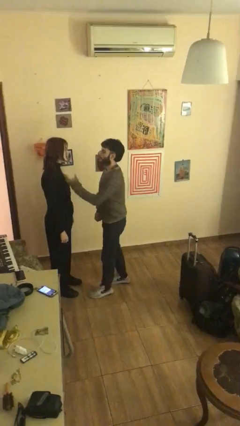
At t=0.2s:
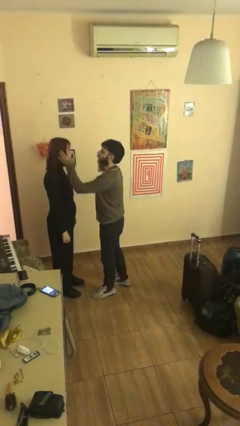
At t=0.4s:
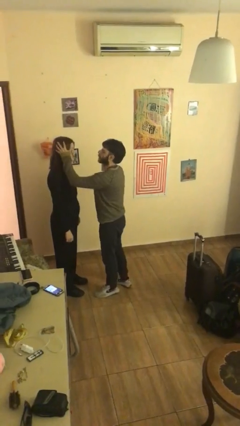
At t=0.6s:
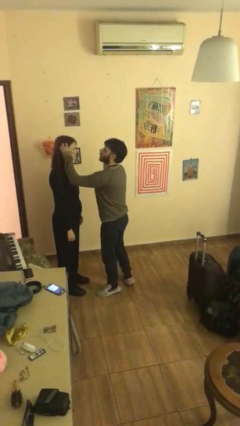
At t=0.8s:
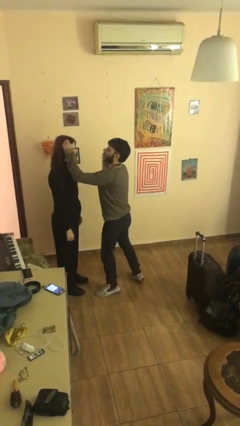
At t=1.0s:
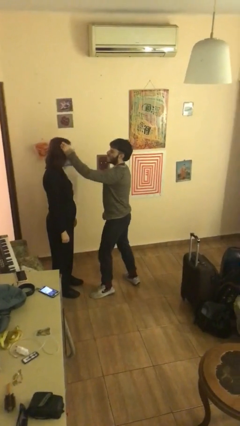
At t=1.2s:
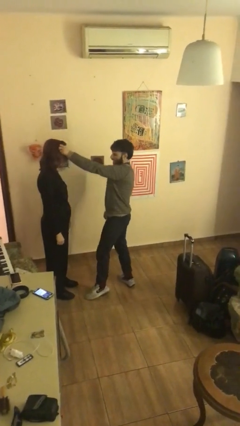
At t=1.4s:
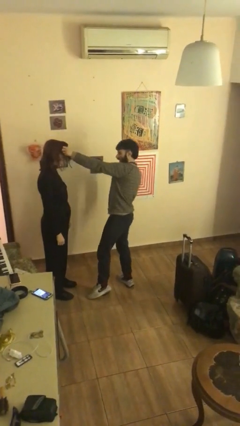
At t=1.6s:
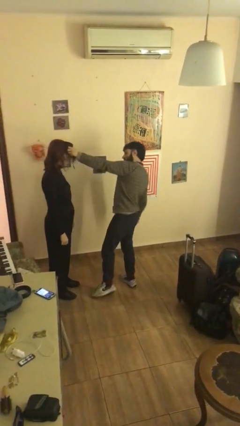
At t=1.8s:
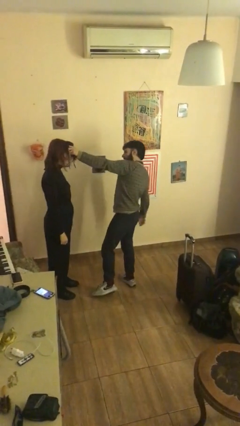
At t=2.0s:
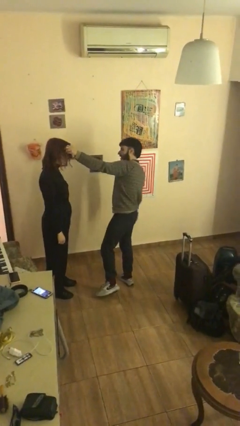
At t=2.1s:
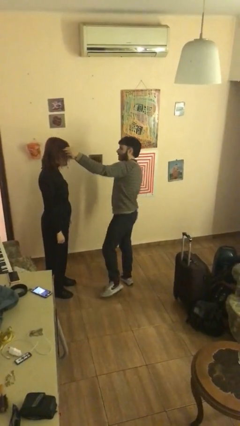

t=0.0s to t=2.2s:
person grabs person by hair

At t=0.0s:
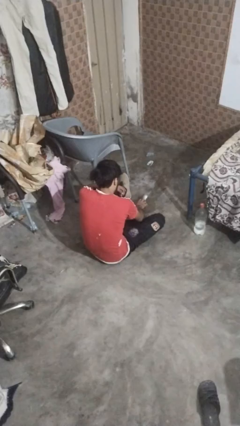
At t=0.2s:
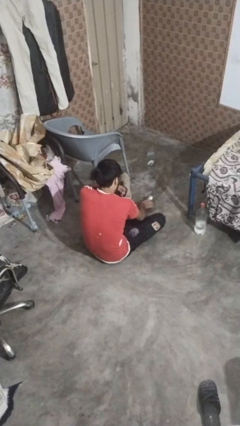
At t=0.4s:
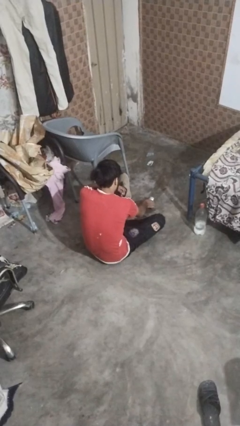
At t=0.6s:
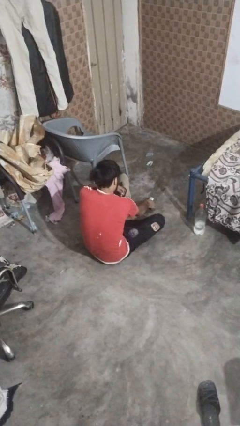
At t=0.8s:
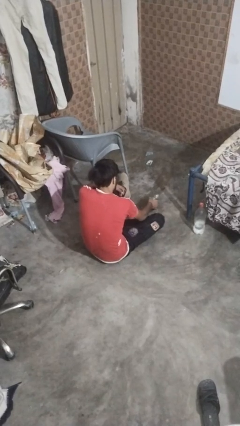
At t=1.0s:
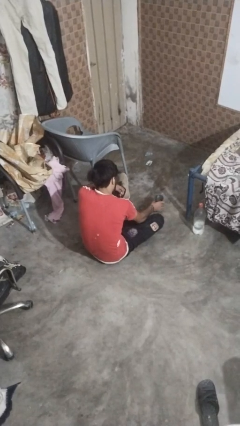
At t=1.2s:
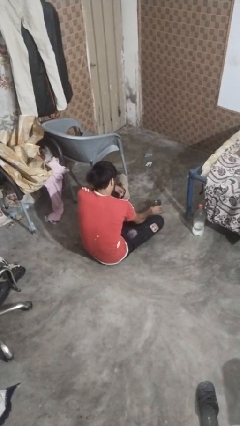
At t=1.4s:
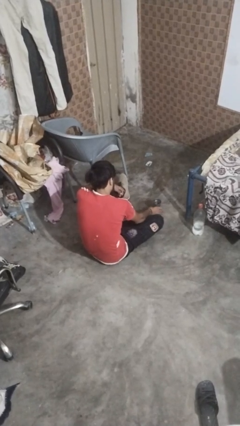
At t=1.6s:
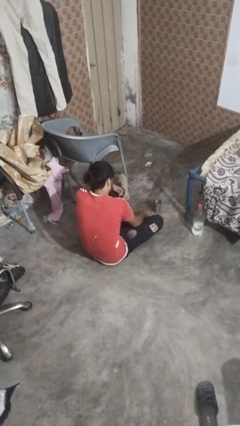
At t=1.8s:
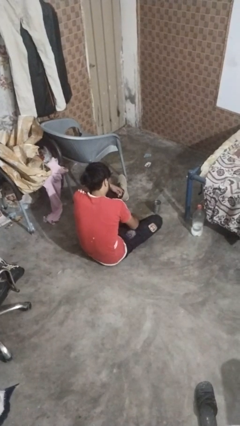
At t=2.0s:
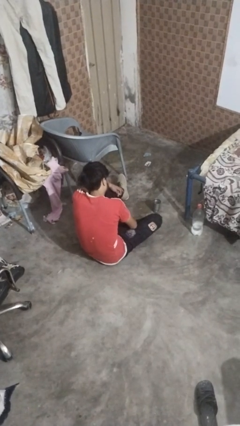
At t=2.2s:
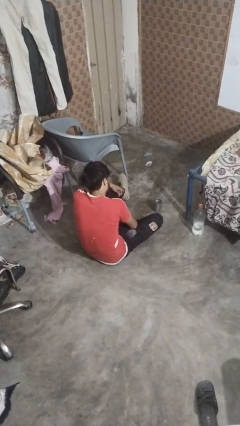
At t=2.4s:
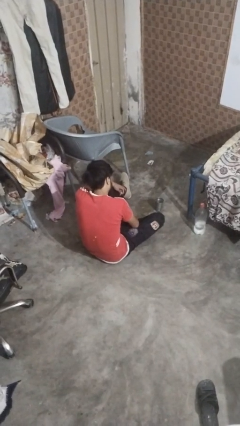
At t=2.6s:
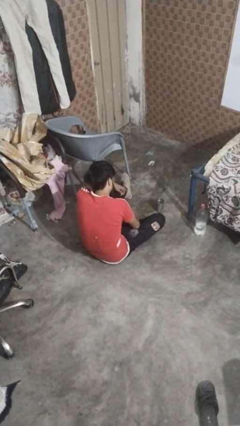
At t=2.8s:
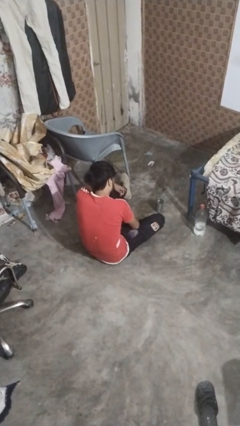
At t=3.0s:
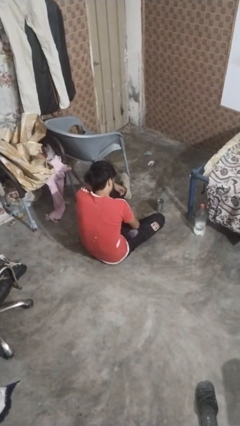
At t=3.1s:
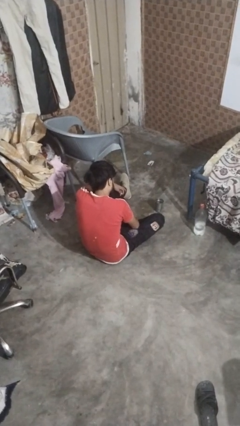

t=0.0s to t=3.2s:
person sets upright glass

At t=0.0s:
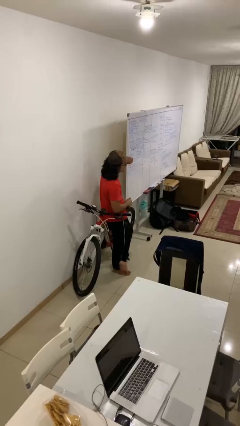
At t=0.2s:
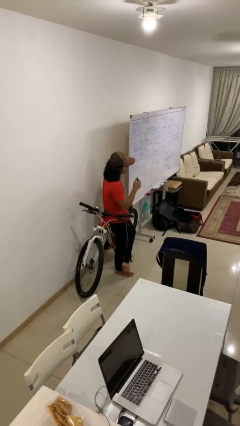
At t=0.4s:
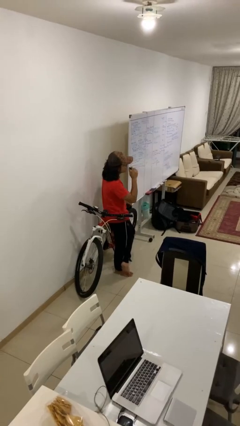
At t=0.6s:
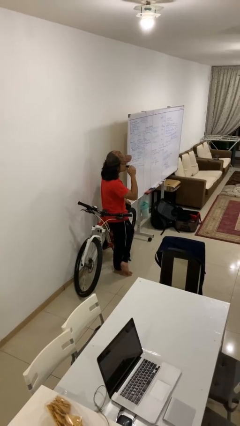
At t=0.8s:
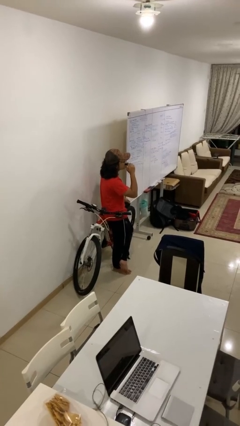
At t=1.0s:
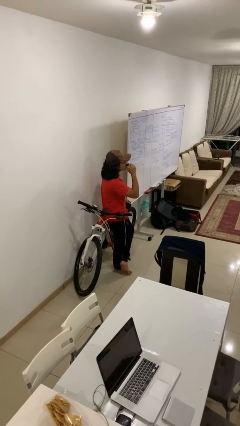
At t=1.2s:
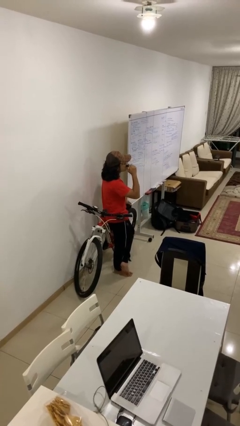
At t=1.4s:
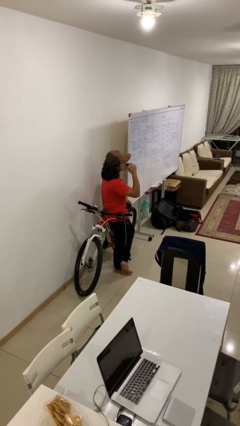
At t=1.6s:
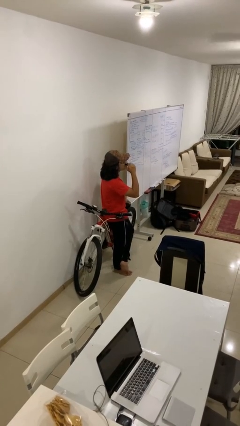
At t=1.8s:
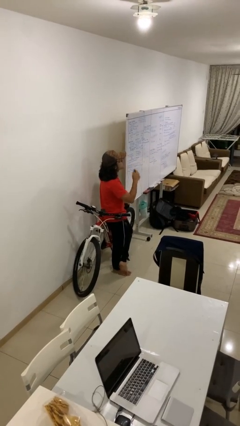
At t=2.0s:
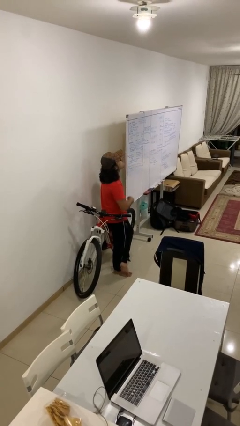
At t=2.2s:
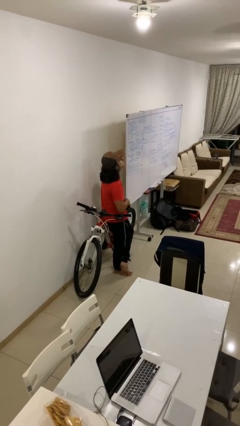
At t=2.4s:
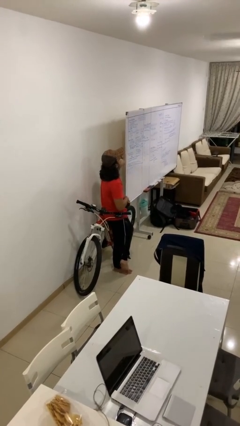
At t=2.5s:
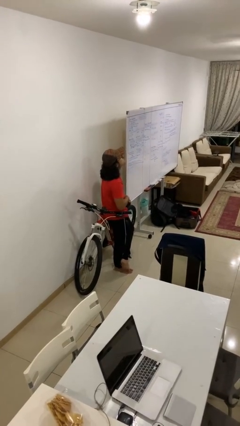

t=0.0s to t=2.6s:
person vapes

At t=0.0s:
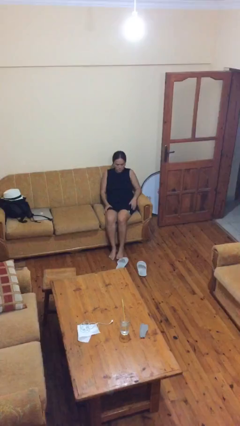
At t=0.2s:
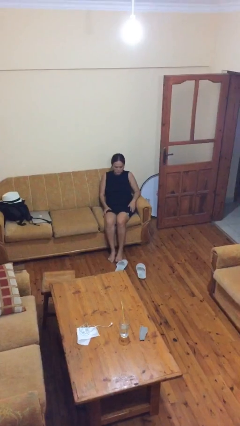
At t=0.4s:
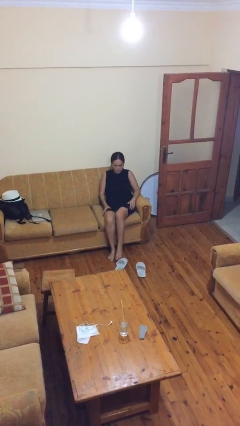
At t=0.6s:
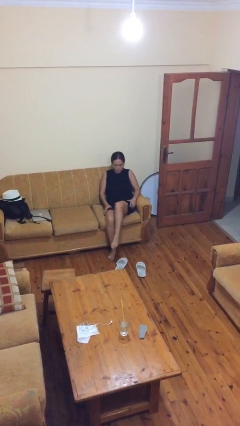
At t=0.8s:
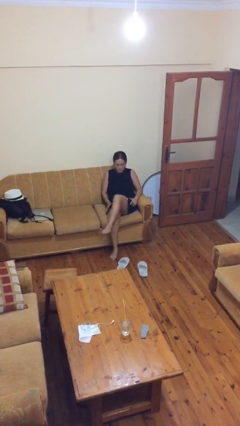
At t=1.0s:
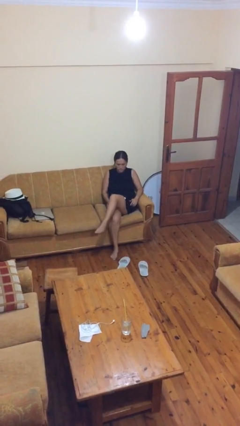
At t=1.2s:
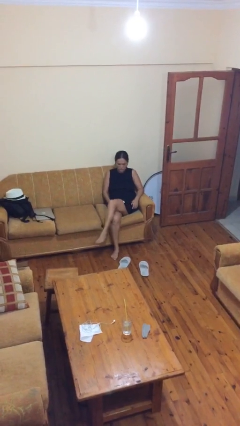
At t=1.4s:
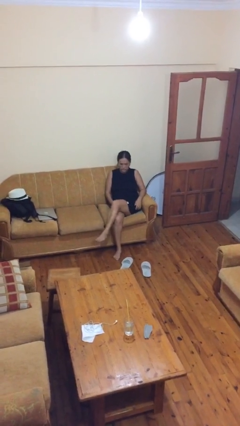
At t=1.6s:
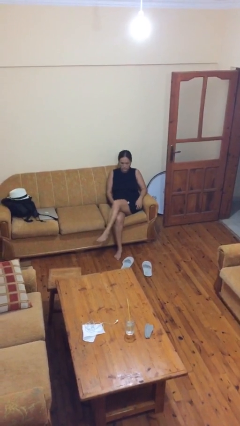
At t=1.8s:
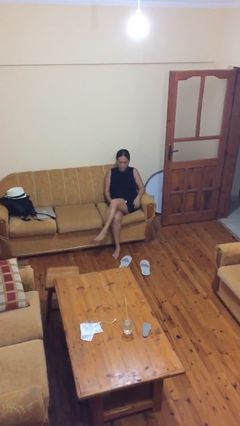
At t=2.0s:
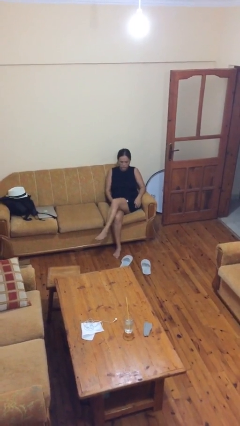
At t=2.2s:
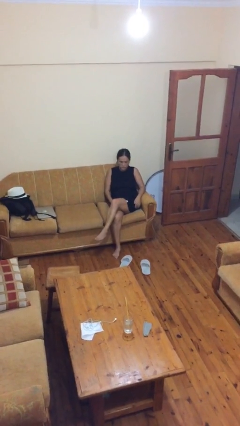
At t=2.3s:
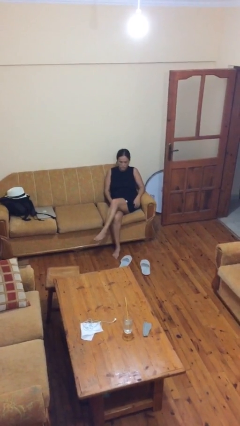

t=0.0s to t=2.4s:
person crosses legs

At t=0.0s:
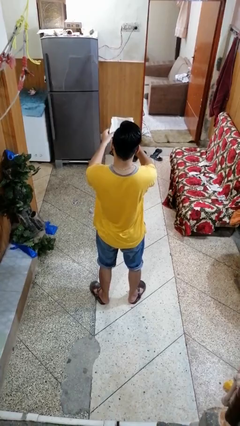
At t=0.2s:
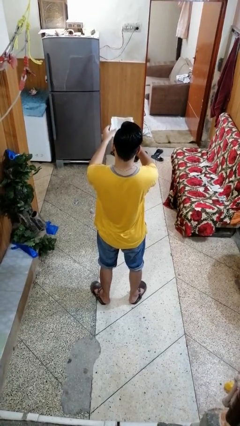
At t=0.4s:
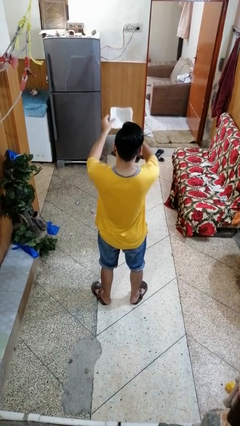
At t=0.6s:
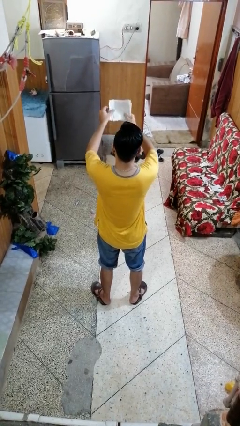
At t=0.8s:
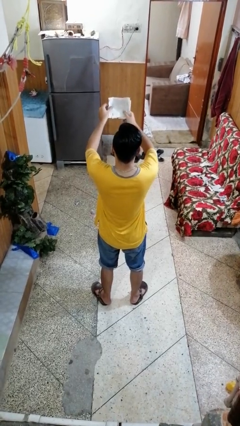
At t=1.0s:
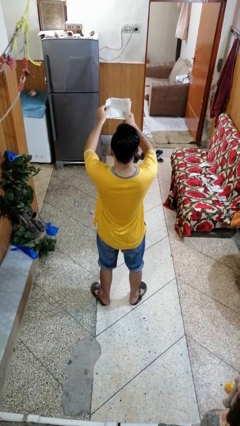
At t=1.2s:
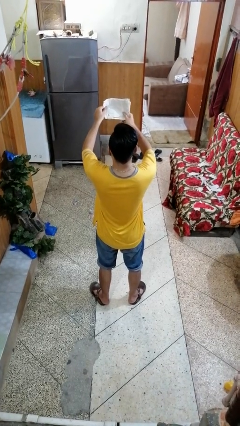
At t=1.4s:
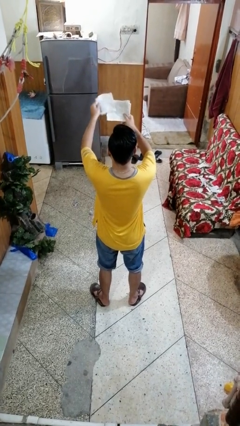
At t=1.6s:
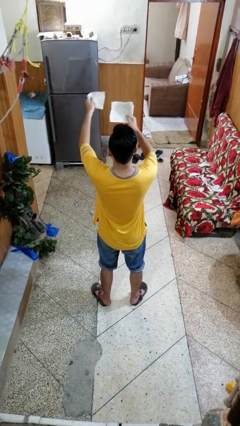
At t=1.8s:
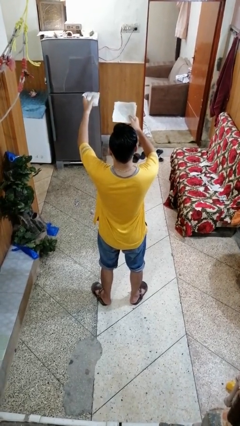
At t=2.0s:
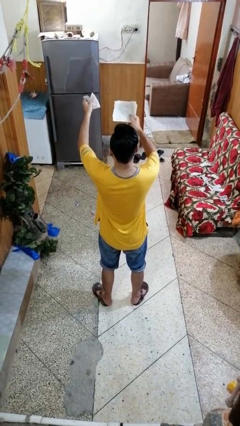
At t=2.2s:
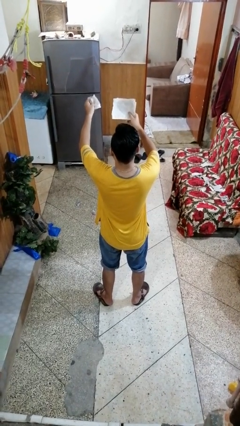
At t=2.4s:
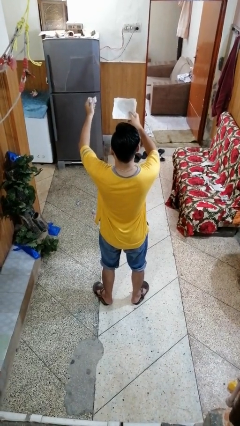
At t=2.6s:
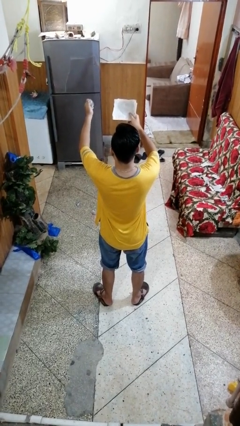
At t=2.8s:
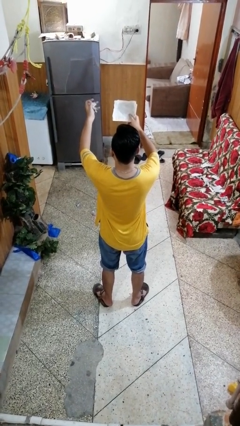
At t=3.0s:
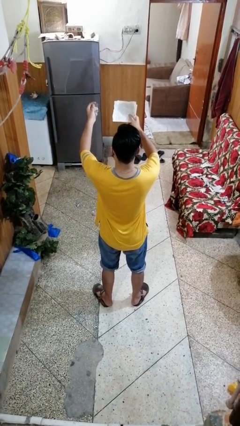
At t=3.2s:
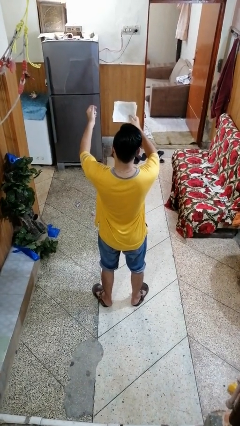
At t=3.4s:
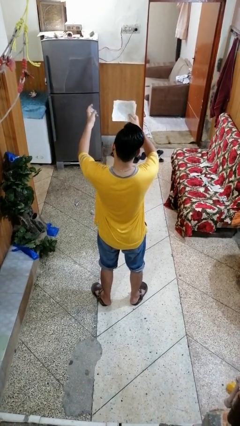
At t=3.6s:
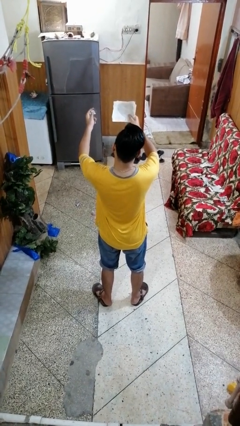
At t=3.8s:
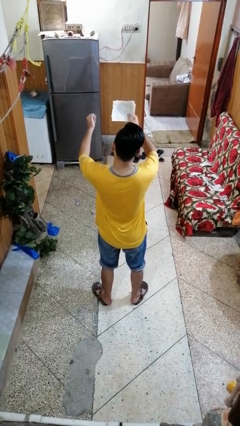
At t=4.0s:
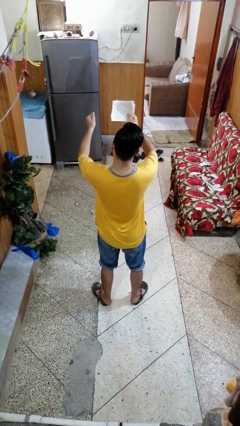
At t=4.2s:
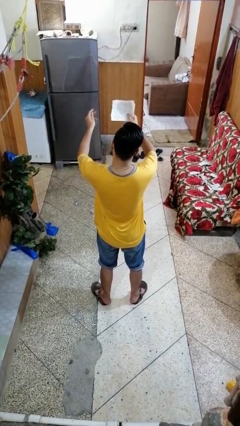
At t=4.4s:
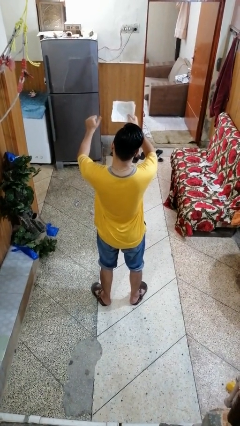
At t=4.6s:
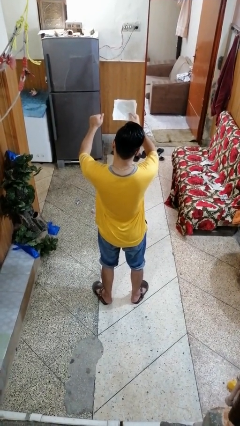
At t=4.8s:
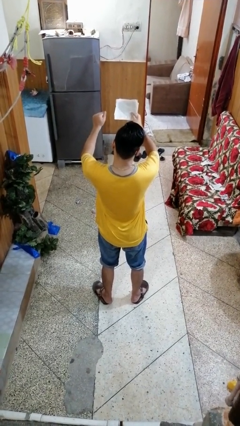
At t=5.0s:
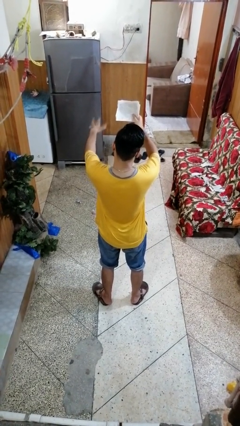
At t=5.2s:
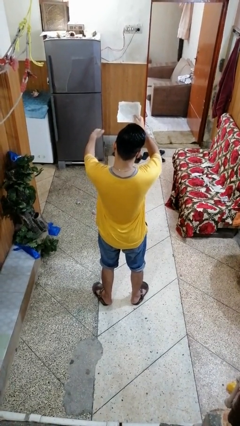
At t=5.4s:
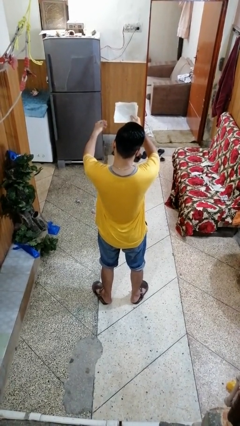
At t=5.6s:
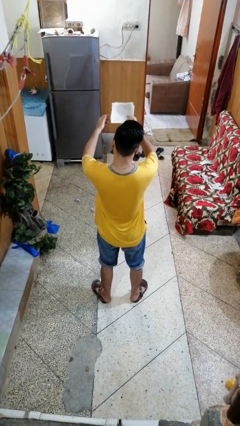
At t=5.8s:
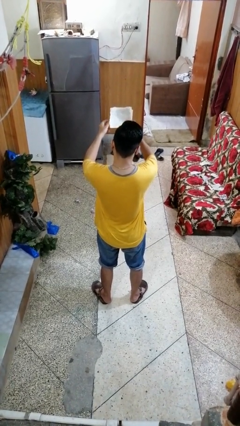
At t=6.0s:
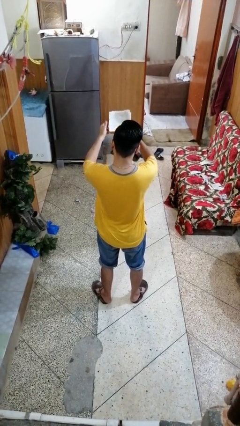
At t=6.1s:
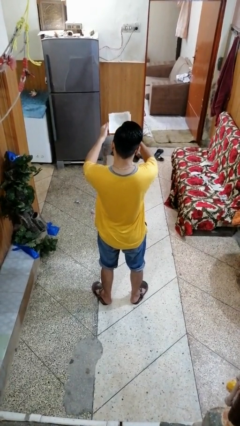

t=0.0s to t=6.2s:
person crumples paper

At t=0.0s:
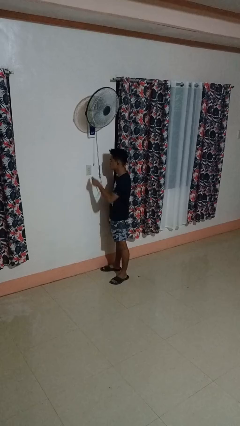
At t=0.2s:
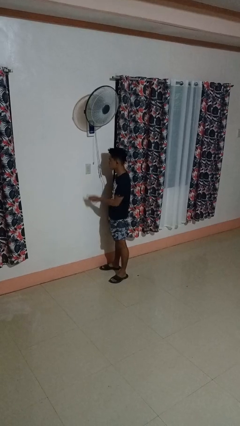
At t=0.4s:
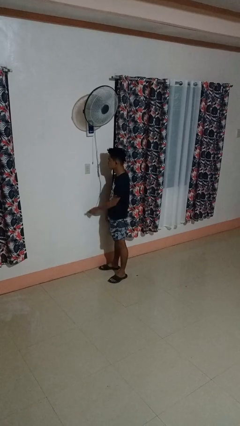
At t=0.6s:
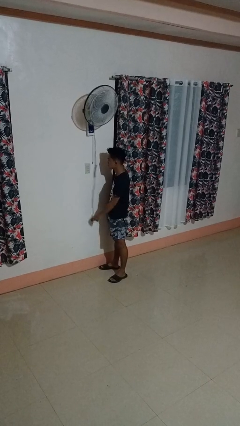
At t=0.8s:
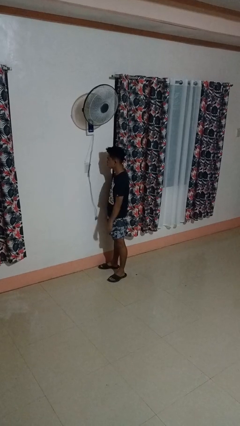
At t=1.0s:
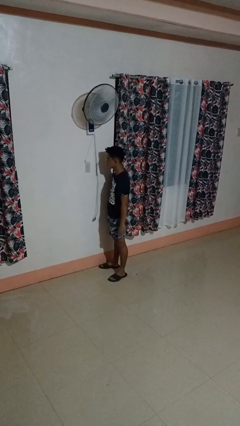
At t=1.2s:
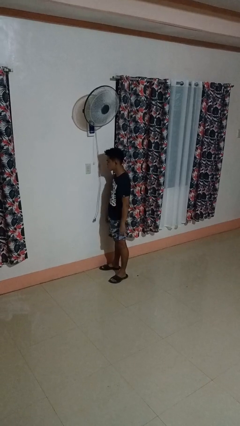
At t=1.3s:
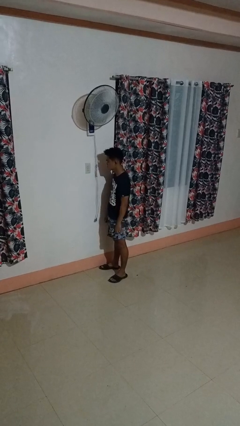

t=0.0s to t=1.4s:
person unplugs from electrical socket
